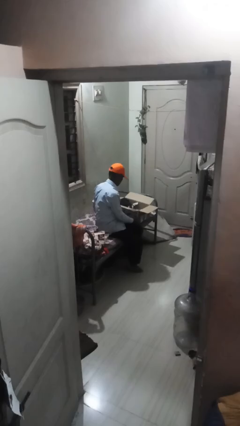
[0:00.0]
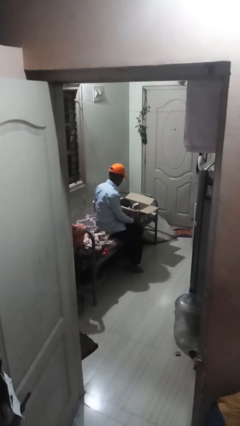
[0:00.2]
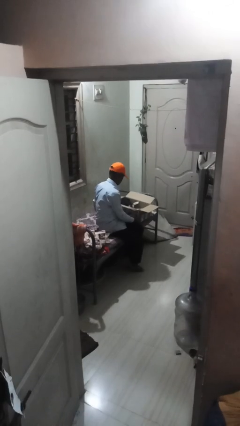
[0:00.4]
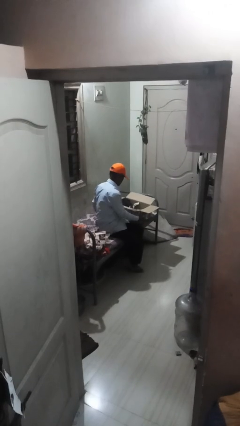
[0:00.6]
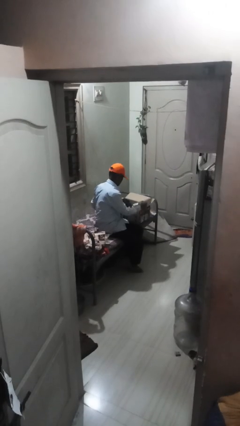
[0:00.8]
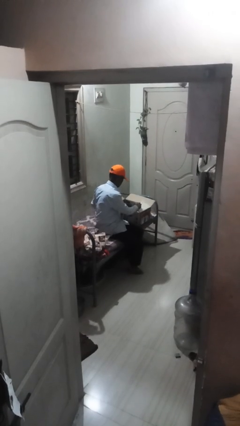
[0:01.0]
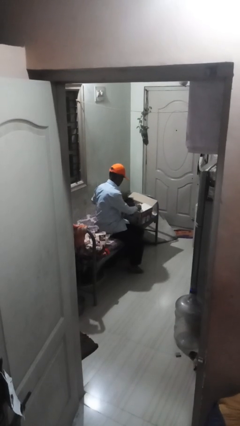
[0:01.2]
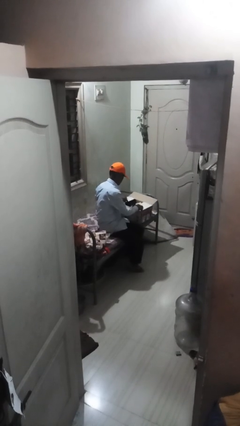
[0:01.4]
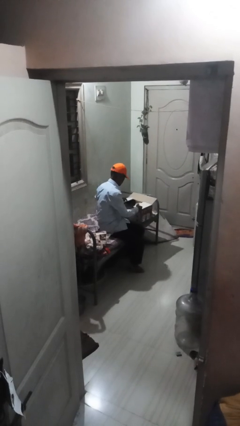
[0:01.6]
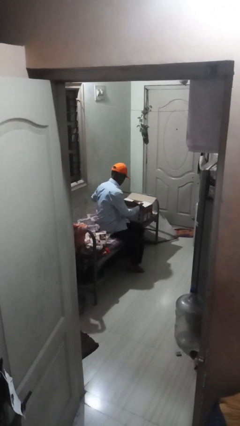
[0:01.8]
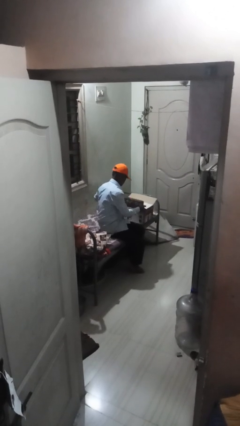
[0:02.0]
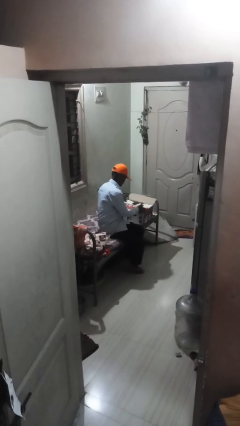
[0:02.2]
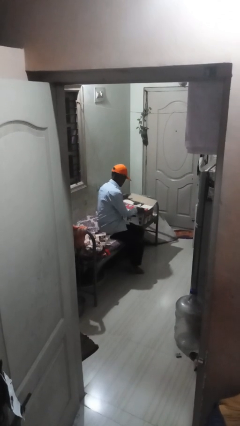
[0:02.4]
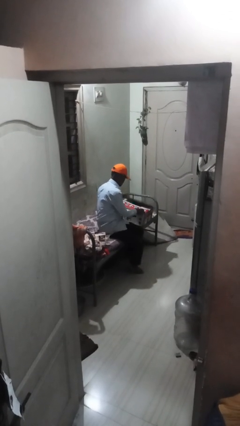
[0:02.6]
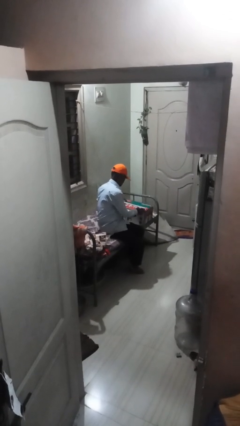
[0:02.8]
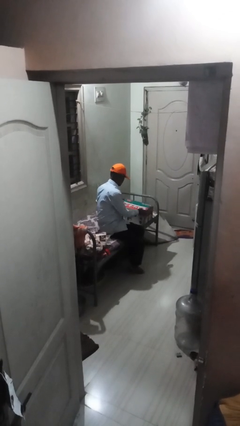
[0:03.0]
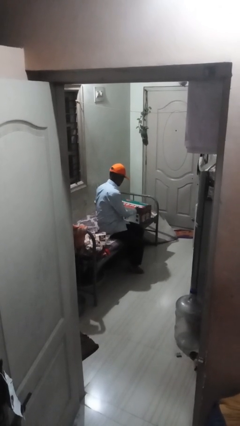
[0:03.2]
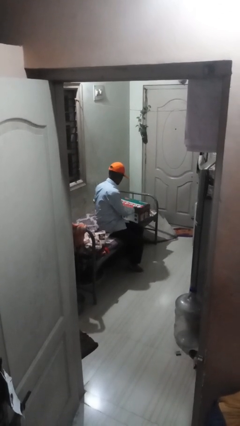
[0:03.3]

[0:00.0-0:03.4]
person closes box

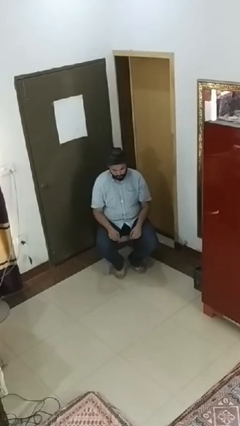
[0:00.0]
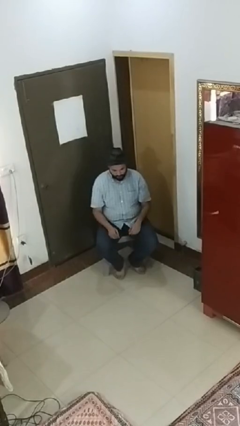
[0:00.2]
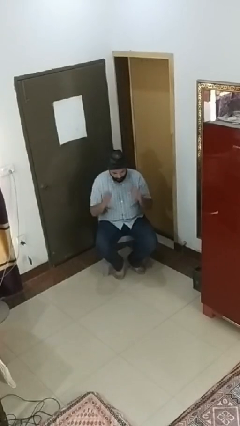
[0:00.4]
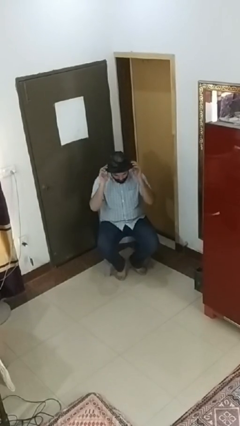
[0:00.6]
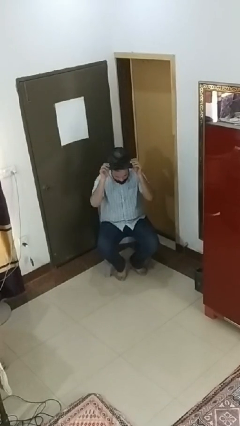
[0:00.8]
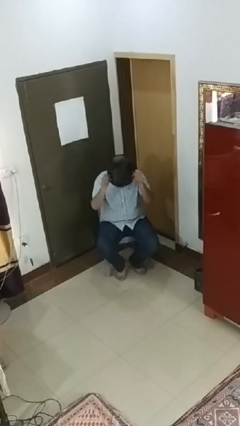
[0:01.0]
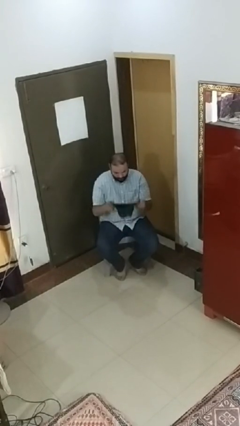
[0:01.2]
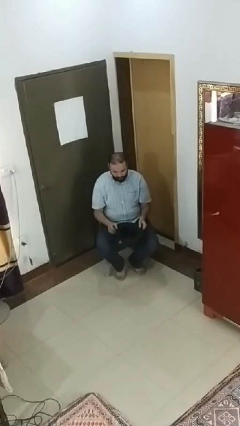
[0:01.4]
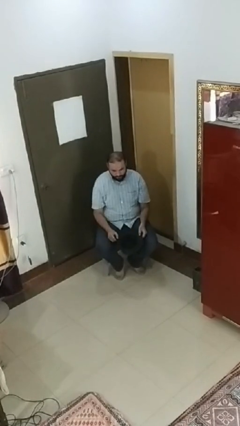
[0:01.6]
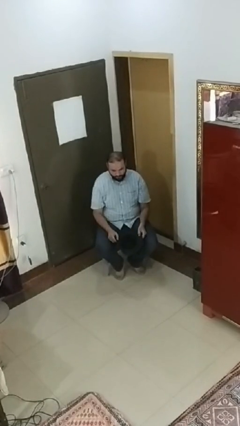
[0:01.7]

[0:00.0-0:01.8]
person takes off hat

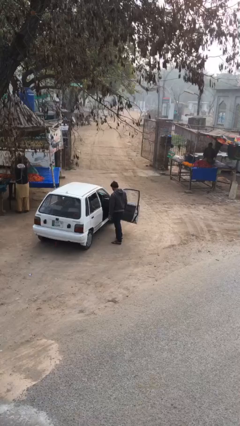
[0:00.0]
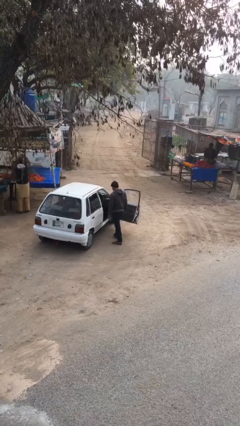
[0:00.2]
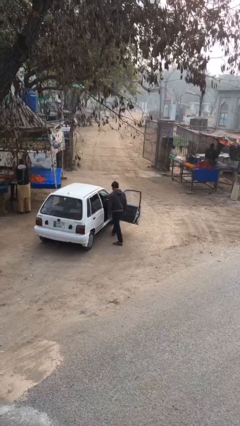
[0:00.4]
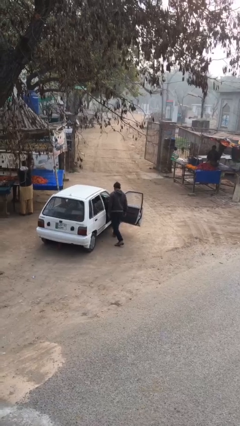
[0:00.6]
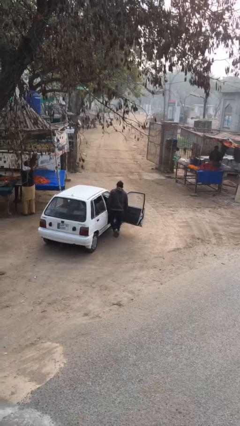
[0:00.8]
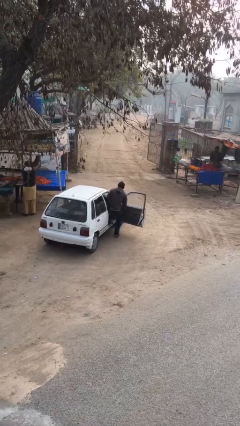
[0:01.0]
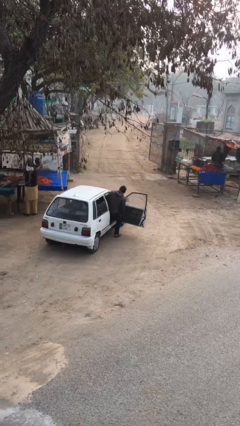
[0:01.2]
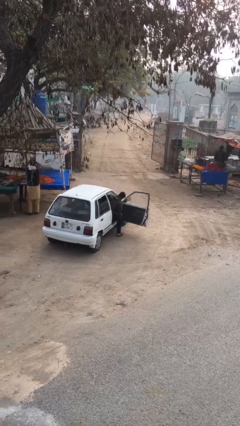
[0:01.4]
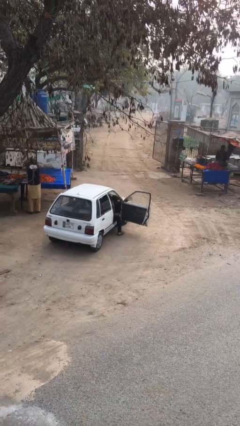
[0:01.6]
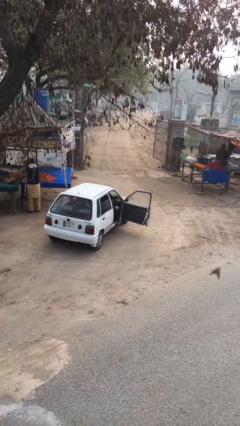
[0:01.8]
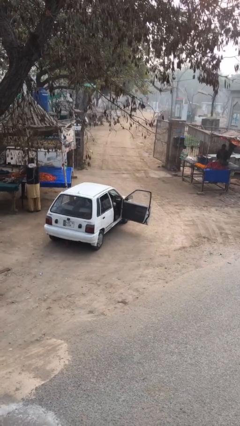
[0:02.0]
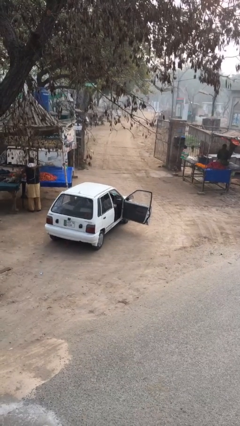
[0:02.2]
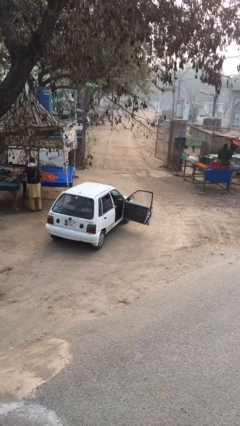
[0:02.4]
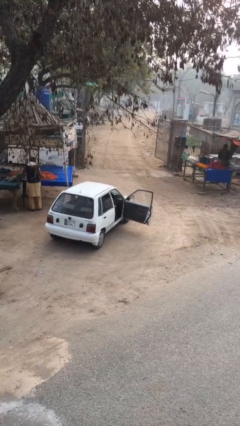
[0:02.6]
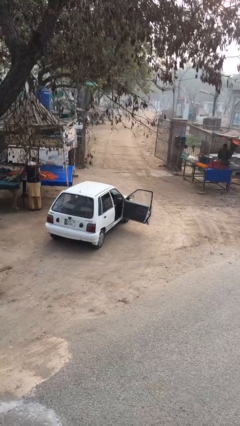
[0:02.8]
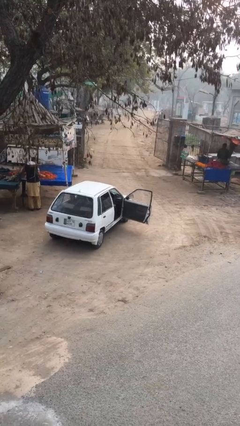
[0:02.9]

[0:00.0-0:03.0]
person enters car

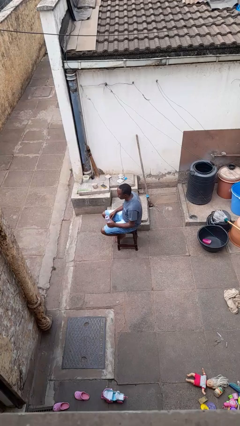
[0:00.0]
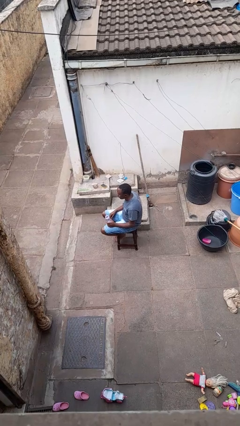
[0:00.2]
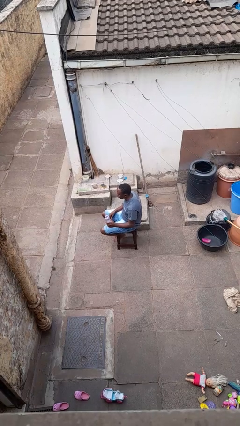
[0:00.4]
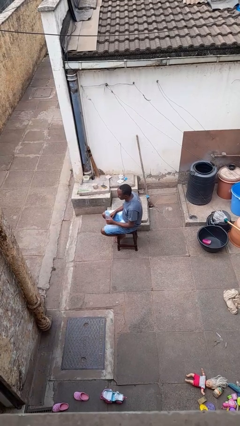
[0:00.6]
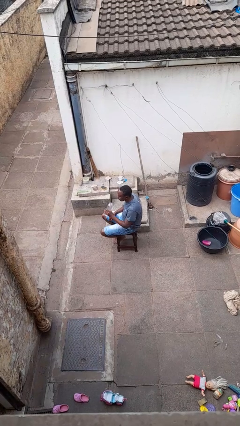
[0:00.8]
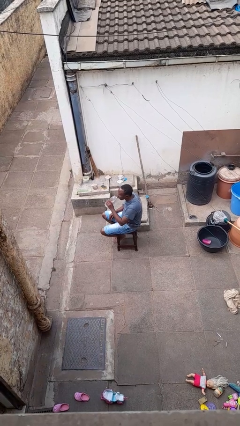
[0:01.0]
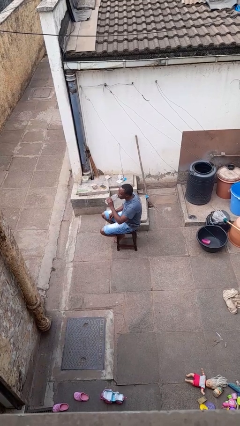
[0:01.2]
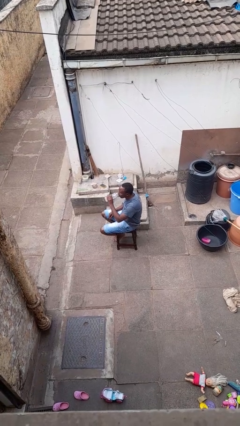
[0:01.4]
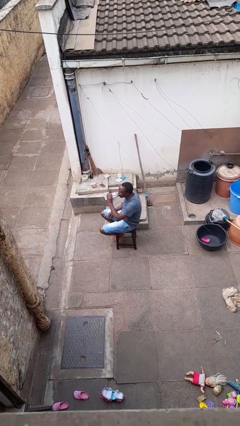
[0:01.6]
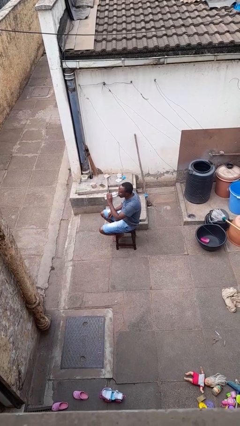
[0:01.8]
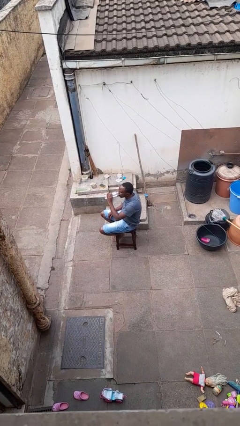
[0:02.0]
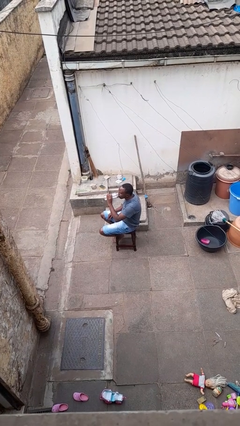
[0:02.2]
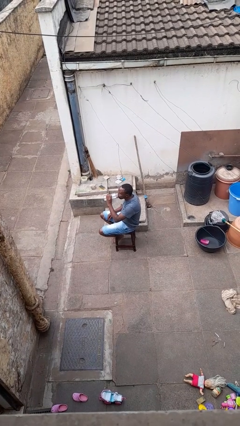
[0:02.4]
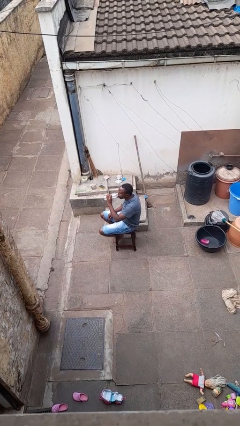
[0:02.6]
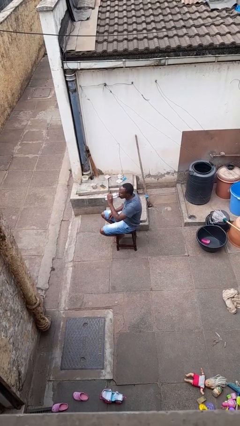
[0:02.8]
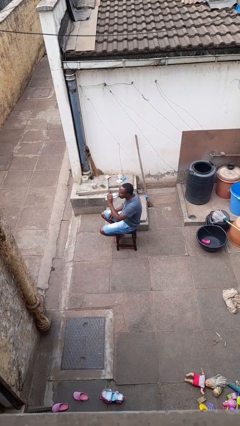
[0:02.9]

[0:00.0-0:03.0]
person drinks from bottle

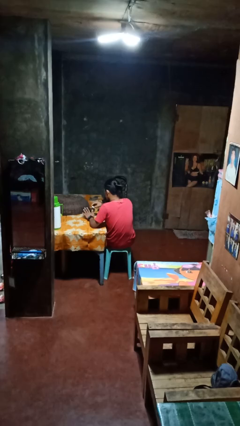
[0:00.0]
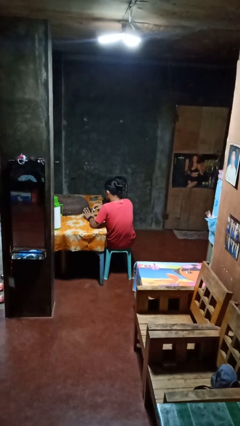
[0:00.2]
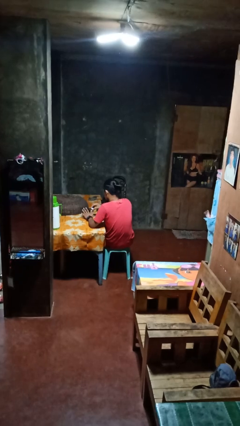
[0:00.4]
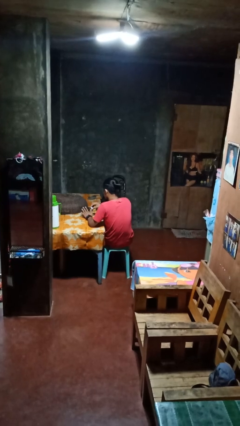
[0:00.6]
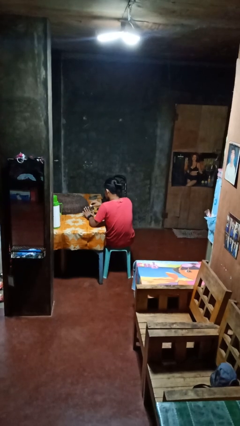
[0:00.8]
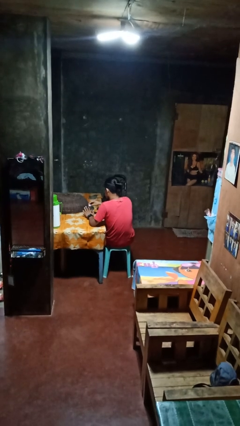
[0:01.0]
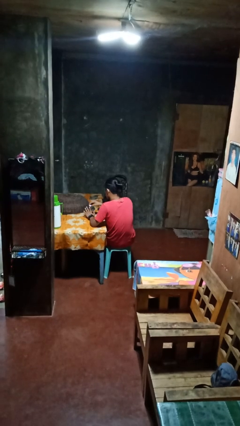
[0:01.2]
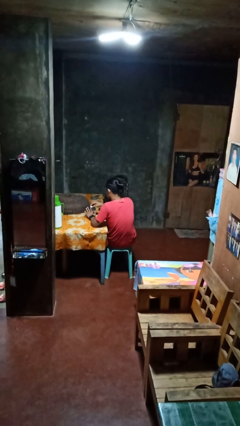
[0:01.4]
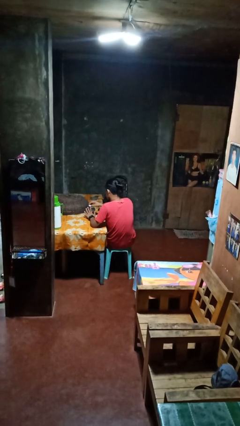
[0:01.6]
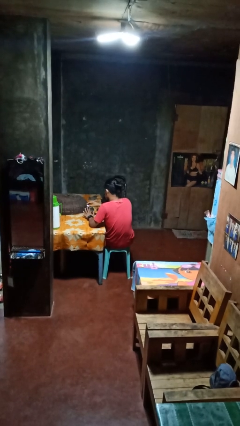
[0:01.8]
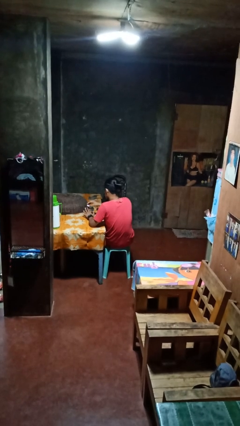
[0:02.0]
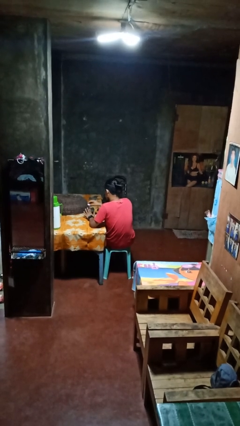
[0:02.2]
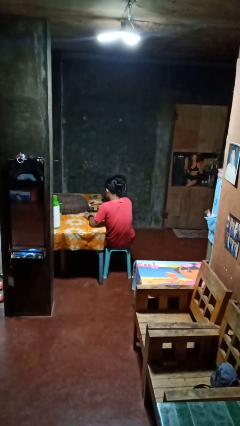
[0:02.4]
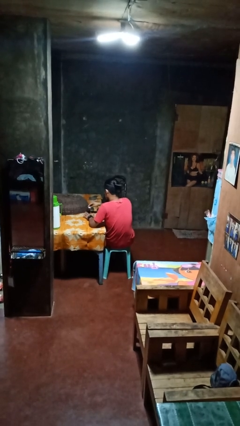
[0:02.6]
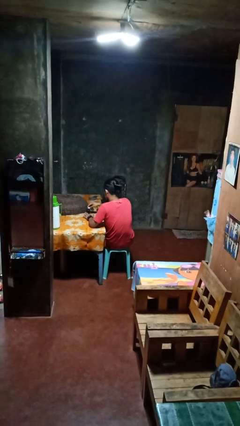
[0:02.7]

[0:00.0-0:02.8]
person paints fingernails

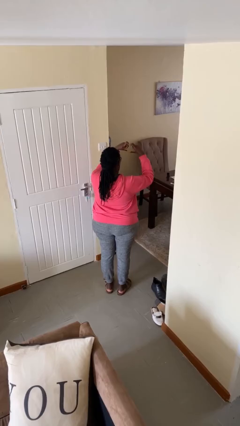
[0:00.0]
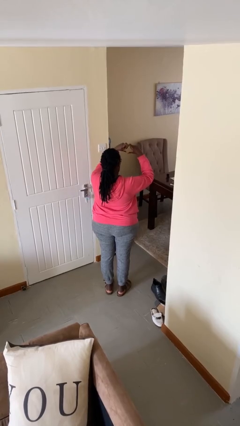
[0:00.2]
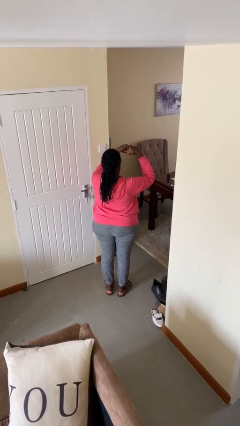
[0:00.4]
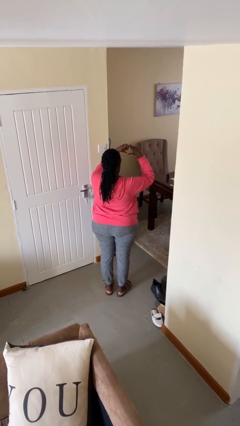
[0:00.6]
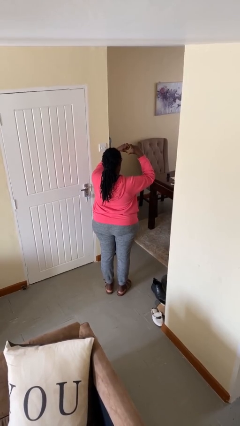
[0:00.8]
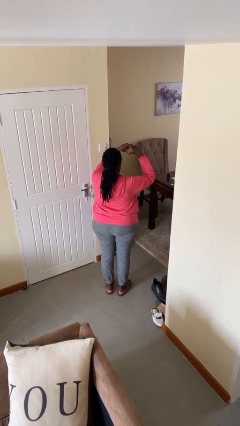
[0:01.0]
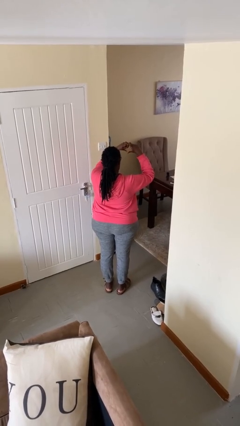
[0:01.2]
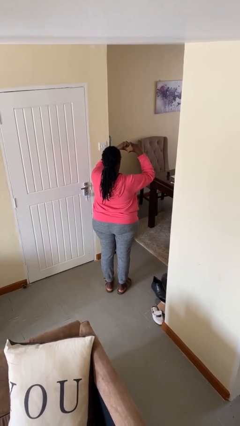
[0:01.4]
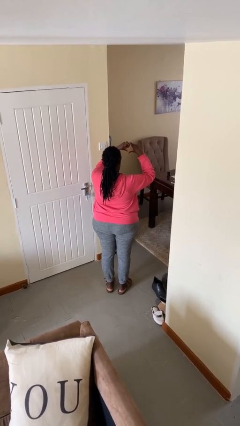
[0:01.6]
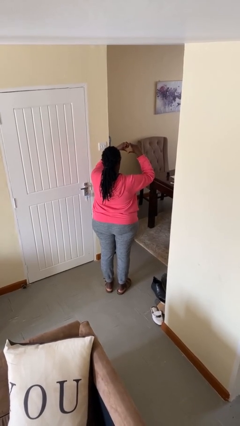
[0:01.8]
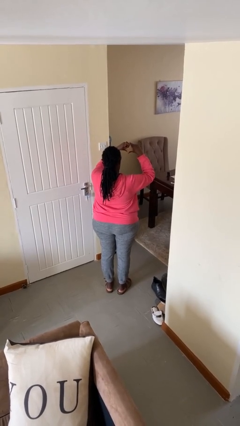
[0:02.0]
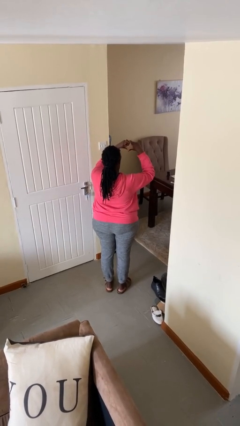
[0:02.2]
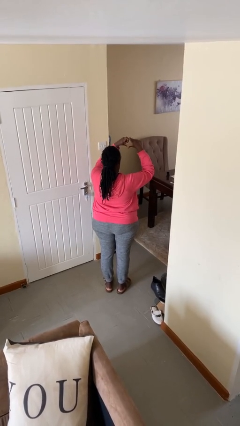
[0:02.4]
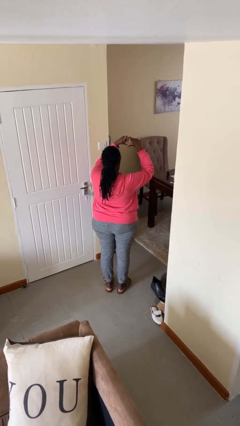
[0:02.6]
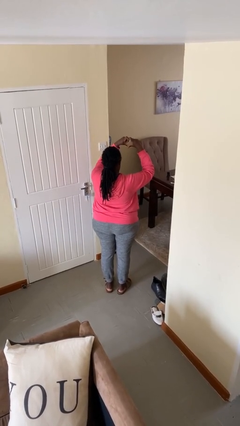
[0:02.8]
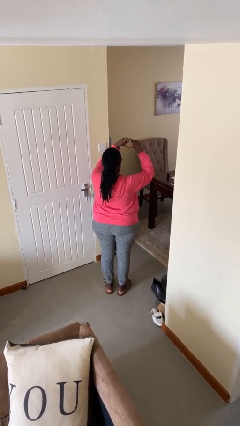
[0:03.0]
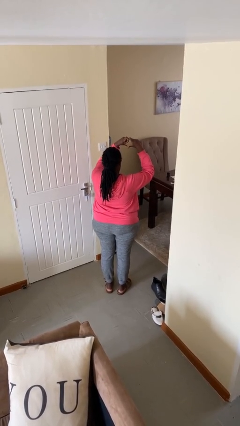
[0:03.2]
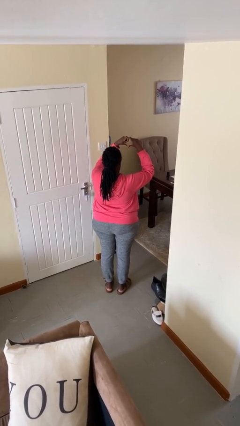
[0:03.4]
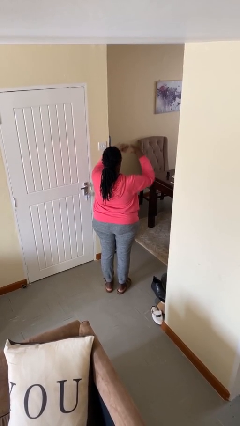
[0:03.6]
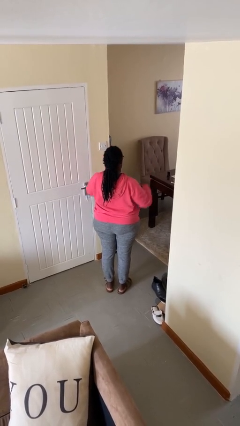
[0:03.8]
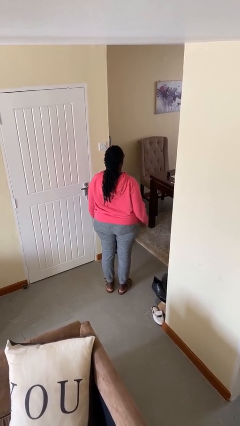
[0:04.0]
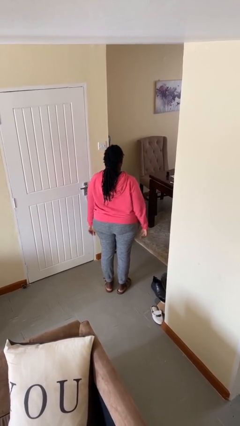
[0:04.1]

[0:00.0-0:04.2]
person gestures heart
